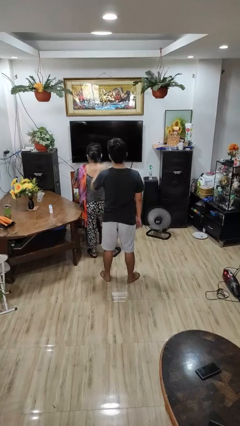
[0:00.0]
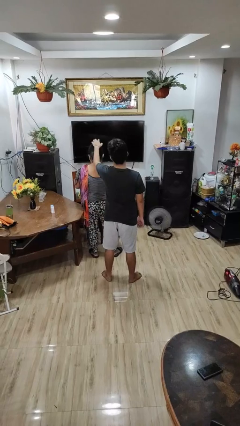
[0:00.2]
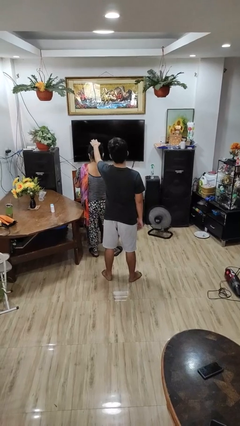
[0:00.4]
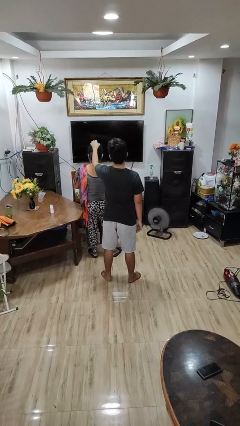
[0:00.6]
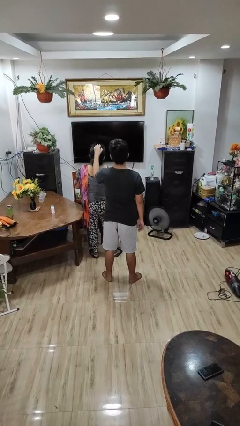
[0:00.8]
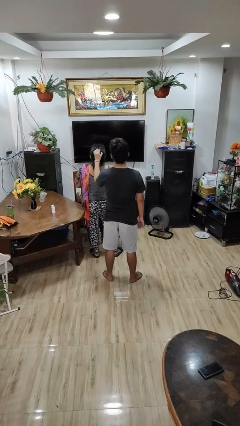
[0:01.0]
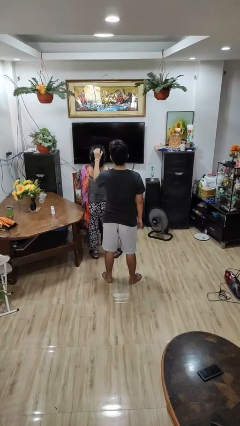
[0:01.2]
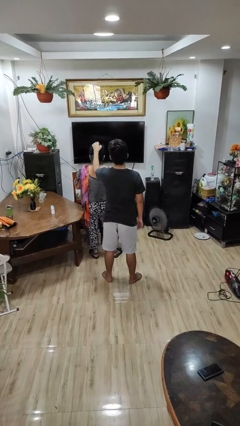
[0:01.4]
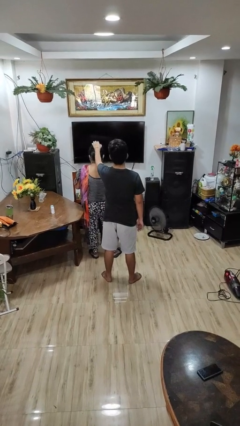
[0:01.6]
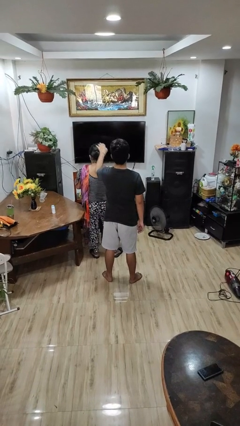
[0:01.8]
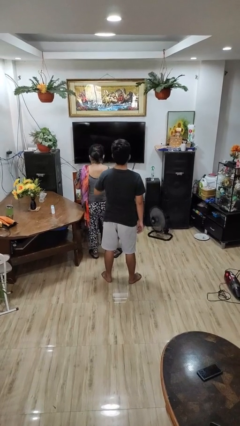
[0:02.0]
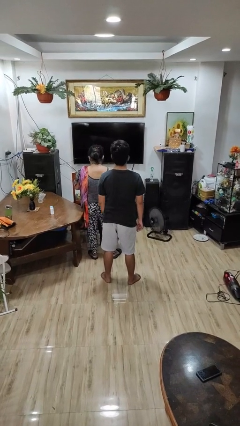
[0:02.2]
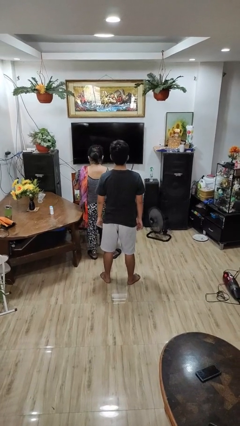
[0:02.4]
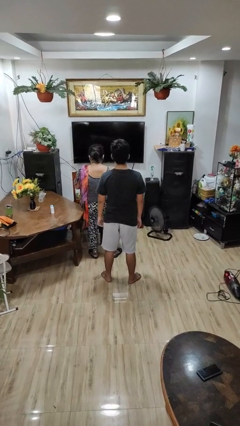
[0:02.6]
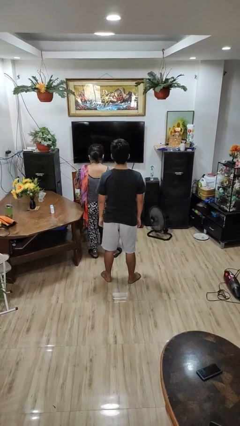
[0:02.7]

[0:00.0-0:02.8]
person grabs person by hair

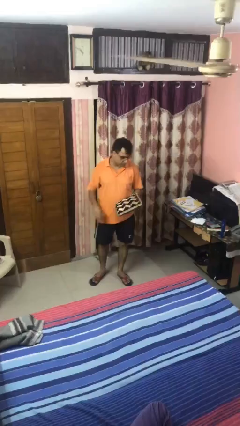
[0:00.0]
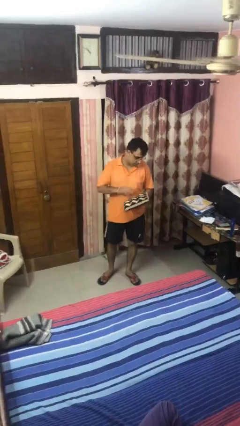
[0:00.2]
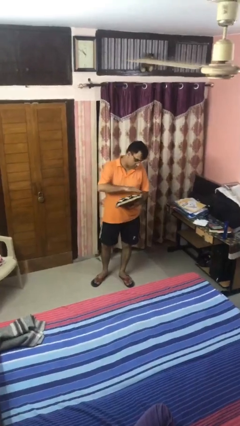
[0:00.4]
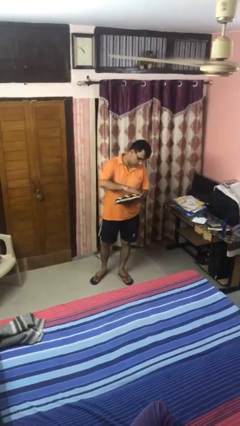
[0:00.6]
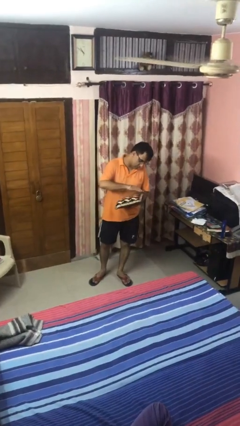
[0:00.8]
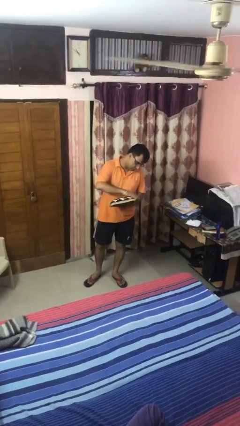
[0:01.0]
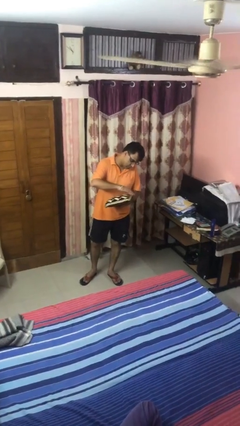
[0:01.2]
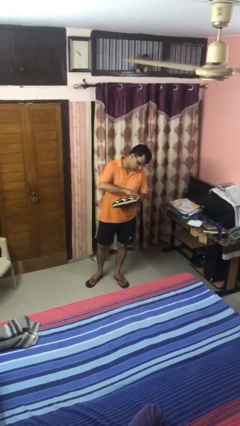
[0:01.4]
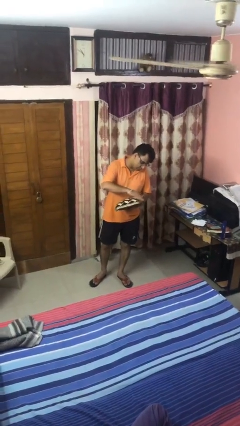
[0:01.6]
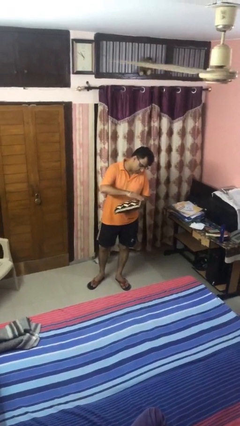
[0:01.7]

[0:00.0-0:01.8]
person waves hand over object

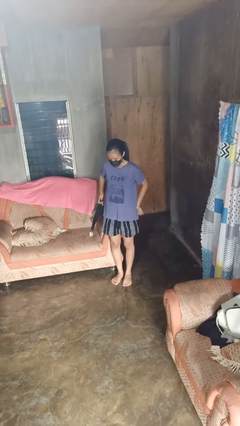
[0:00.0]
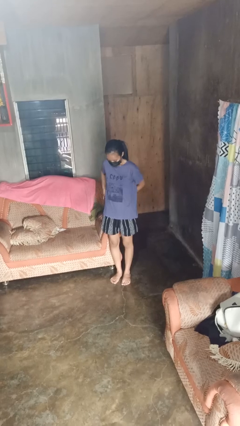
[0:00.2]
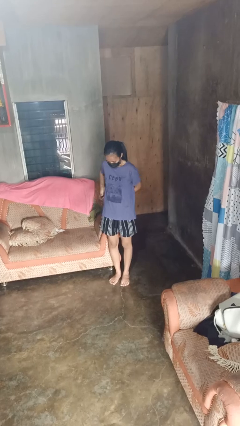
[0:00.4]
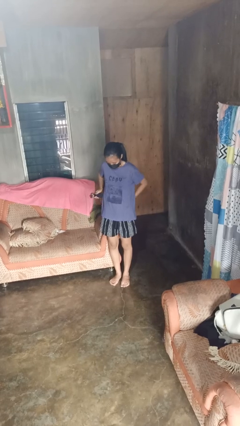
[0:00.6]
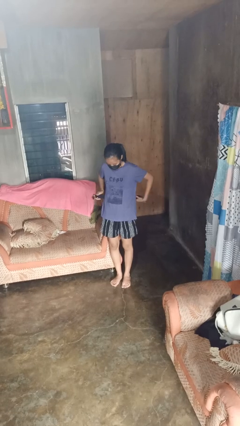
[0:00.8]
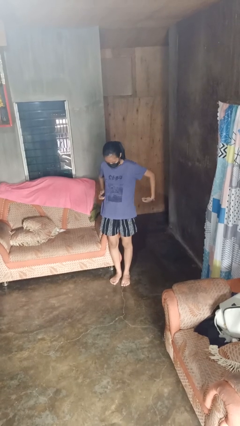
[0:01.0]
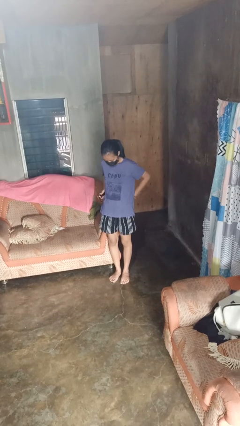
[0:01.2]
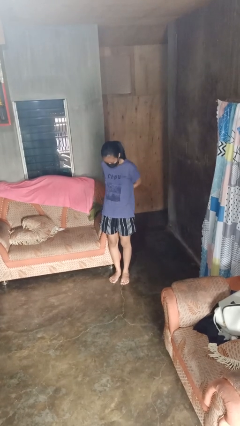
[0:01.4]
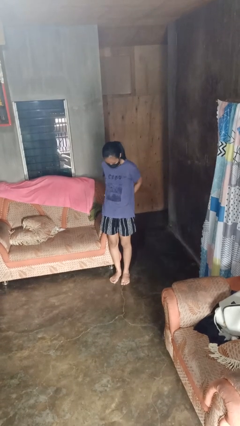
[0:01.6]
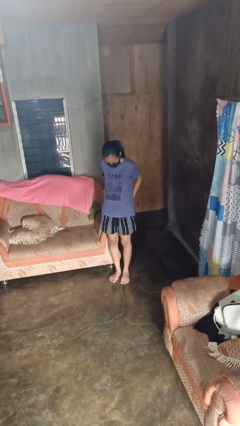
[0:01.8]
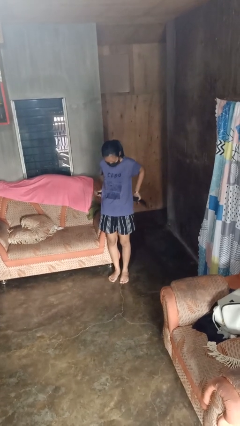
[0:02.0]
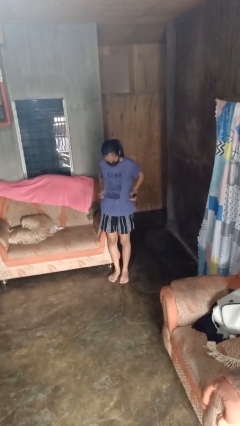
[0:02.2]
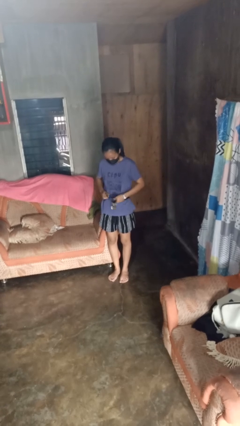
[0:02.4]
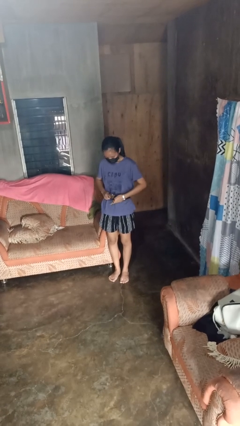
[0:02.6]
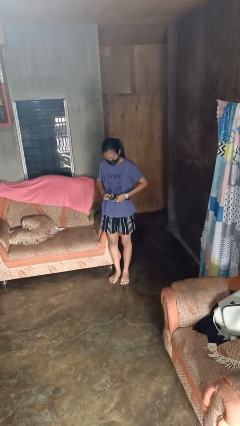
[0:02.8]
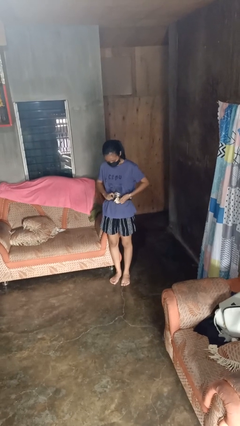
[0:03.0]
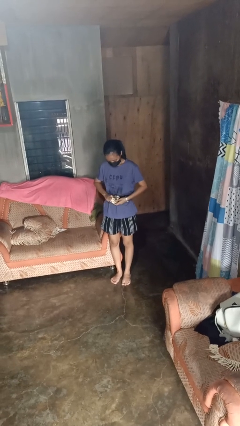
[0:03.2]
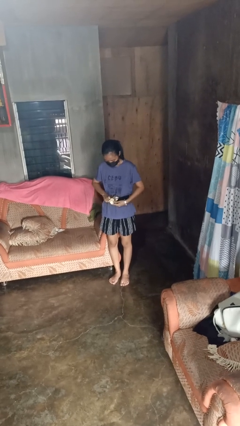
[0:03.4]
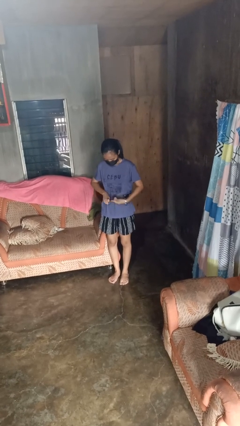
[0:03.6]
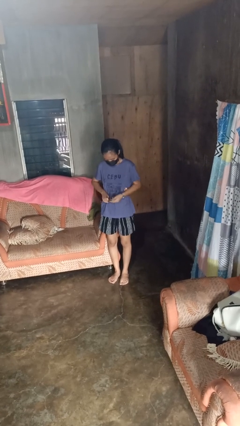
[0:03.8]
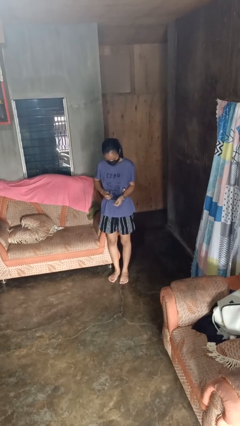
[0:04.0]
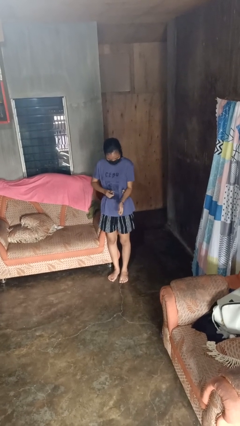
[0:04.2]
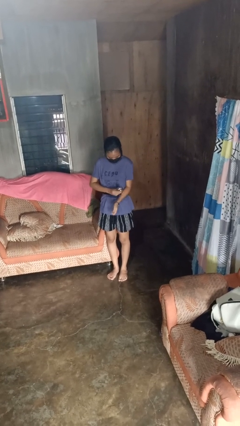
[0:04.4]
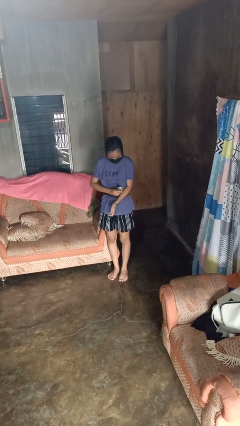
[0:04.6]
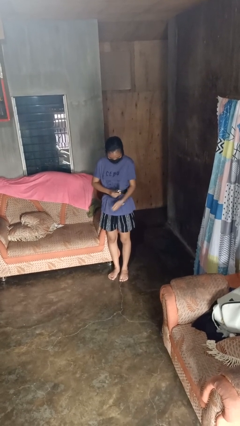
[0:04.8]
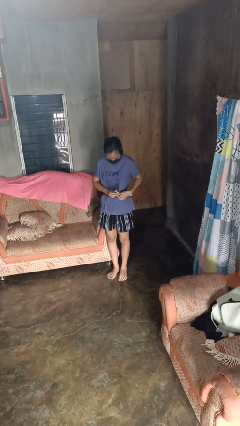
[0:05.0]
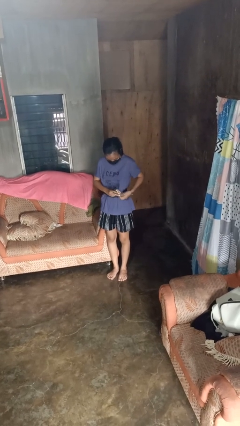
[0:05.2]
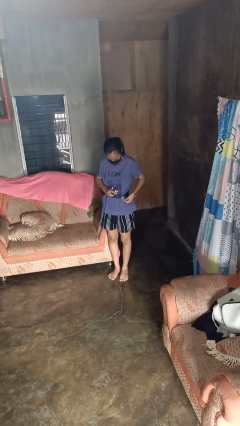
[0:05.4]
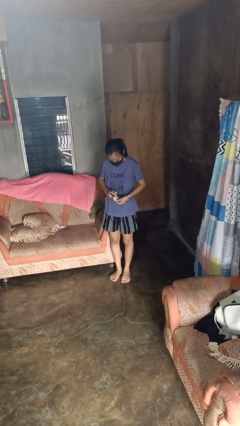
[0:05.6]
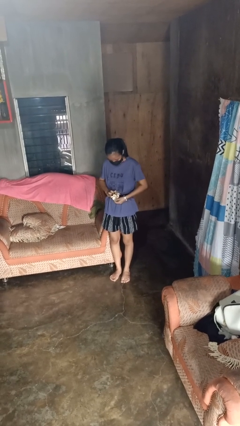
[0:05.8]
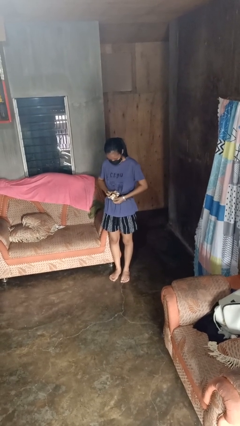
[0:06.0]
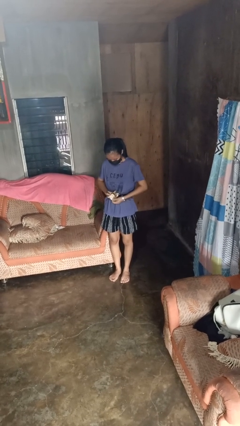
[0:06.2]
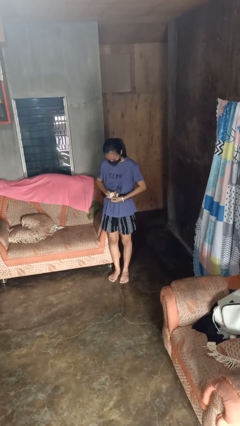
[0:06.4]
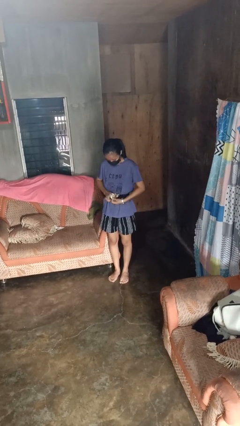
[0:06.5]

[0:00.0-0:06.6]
person puts on belt

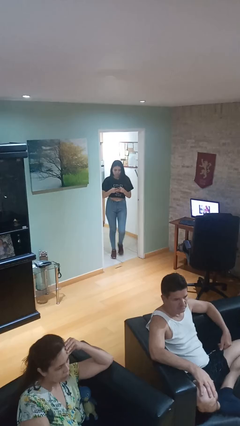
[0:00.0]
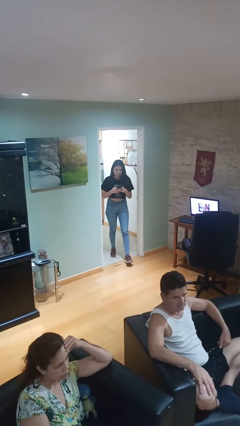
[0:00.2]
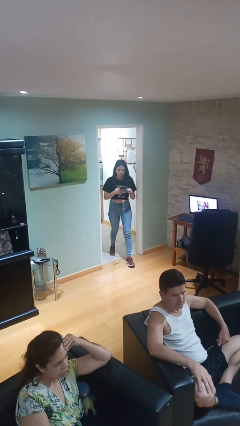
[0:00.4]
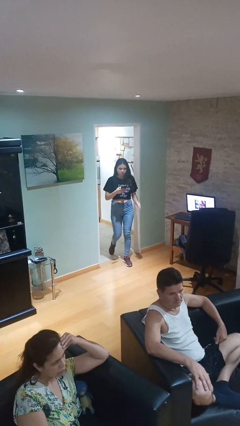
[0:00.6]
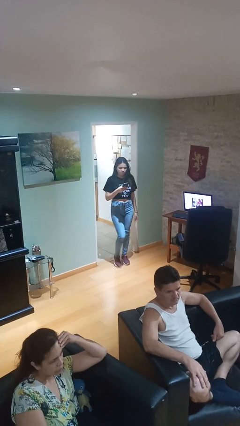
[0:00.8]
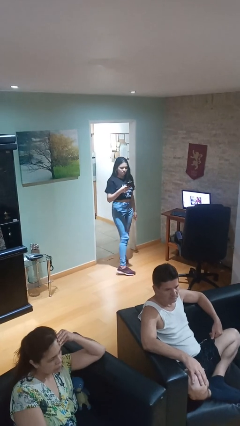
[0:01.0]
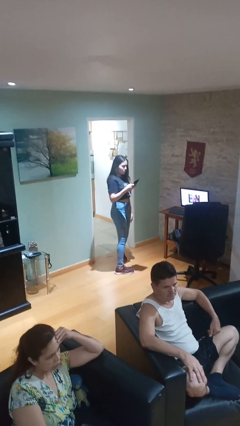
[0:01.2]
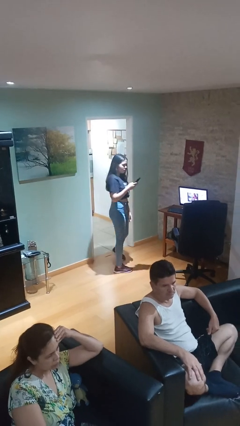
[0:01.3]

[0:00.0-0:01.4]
person enters scene through structure

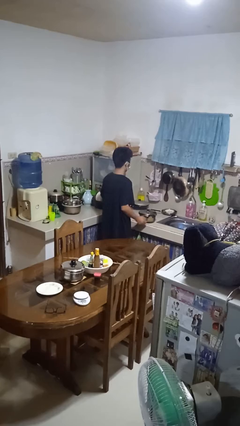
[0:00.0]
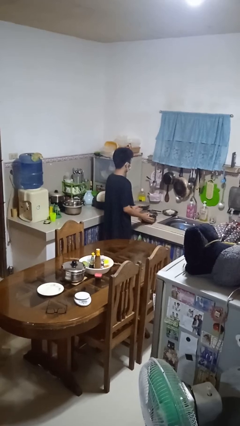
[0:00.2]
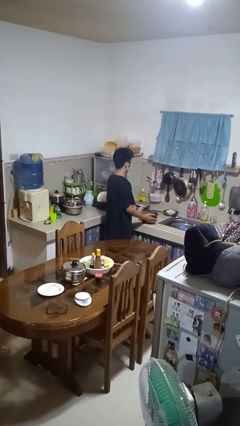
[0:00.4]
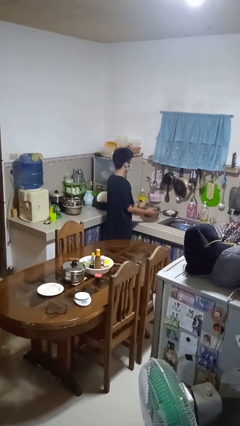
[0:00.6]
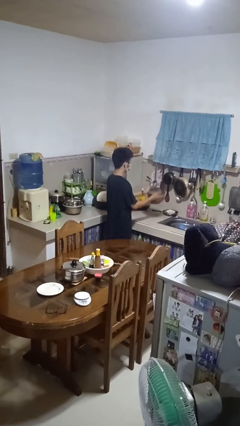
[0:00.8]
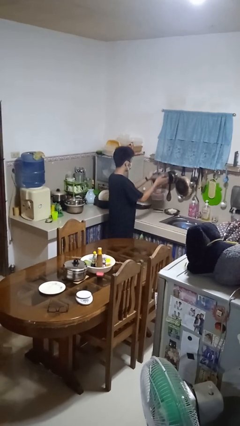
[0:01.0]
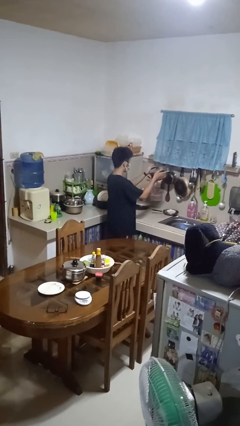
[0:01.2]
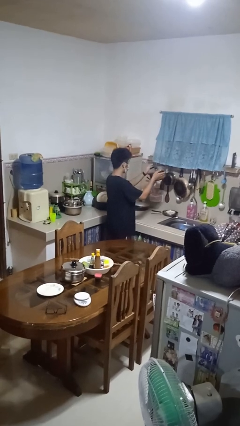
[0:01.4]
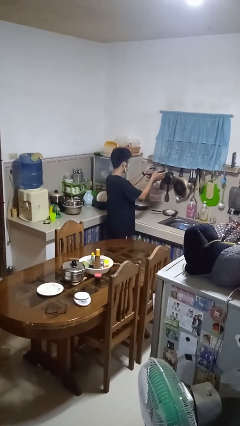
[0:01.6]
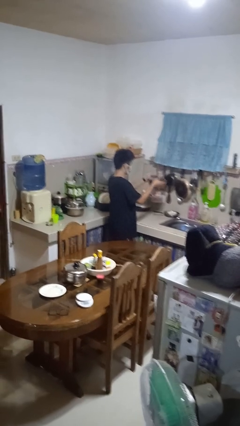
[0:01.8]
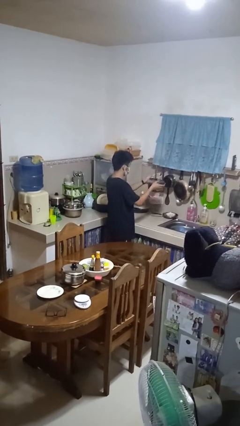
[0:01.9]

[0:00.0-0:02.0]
person picks up object from countertop

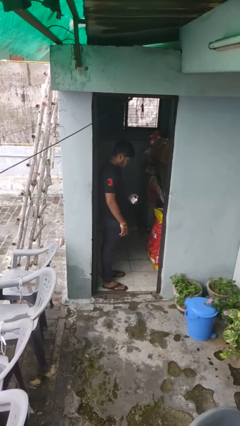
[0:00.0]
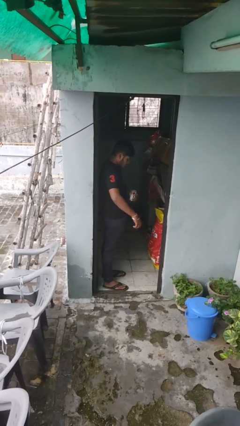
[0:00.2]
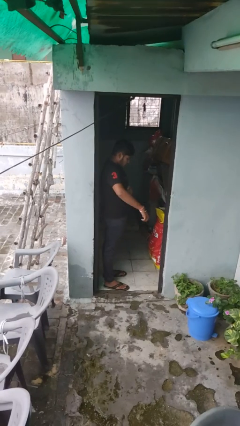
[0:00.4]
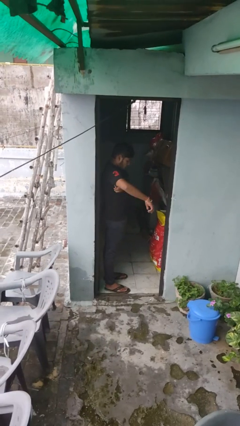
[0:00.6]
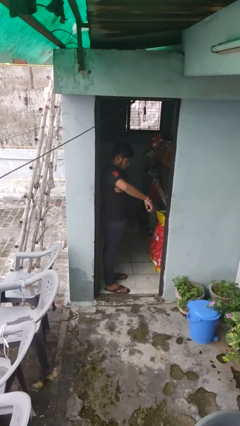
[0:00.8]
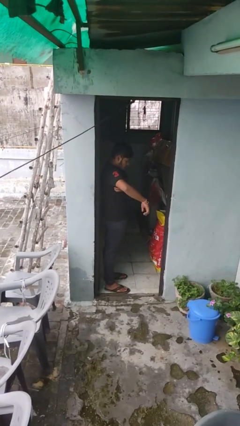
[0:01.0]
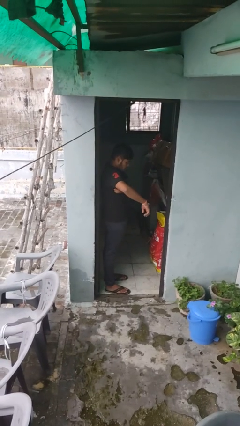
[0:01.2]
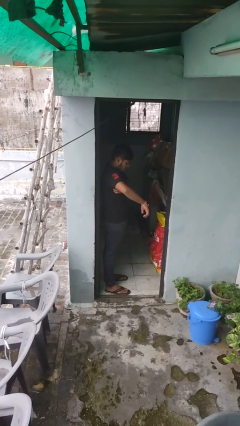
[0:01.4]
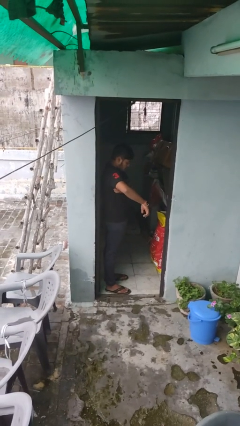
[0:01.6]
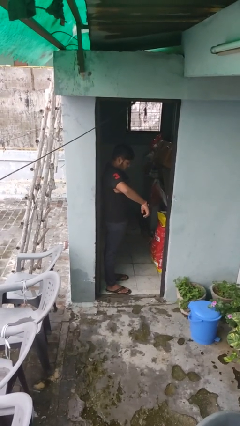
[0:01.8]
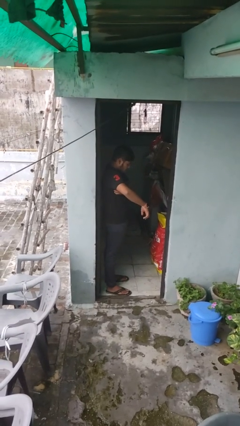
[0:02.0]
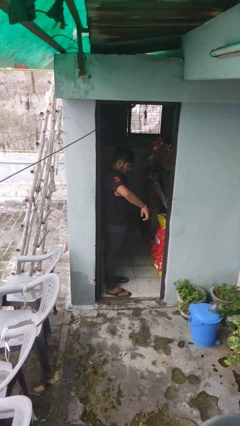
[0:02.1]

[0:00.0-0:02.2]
person applies deodorant

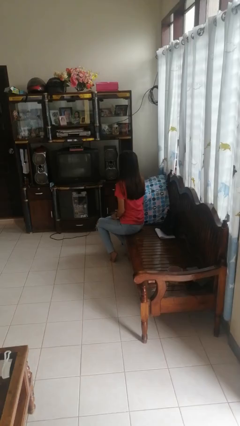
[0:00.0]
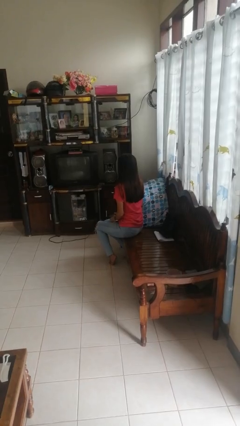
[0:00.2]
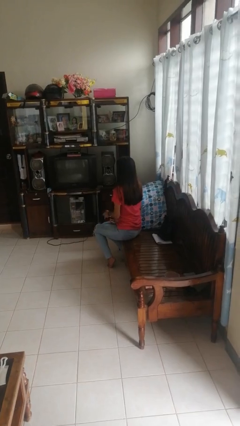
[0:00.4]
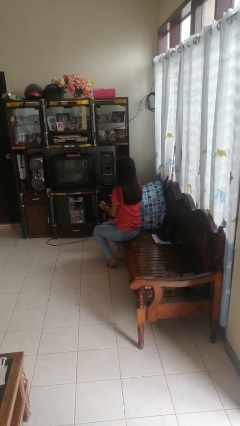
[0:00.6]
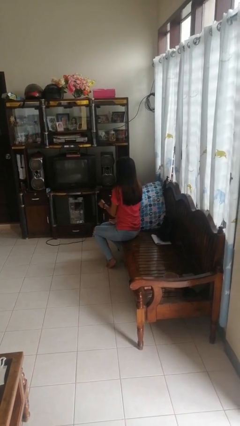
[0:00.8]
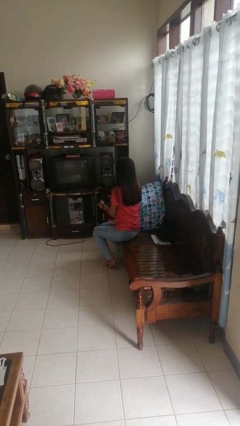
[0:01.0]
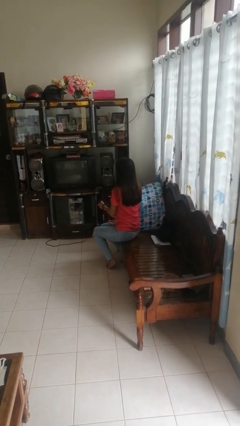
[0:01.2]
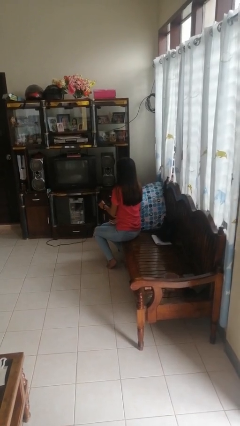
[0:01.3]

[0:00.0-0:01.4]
person uses television remote
